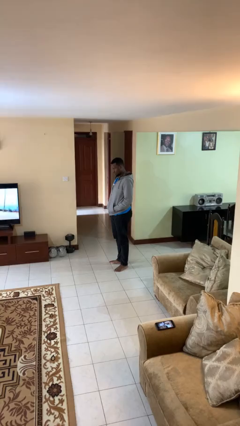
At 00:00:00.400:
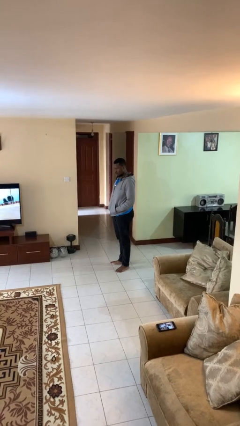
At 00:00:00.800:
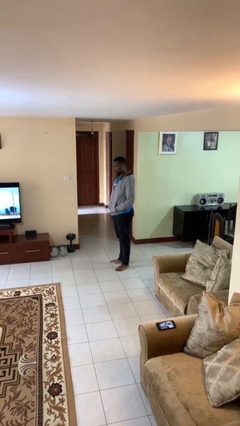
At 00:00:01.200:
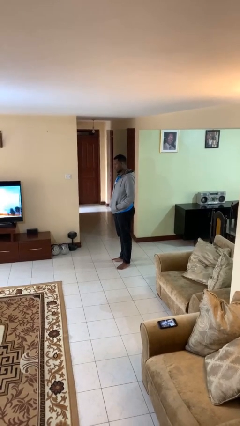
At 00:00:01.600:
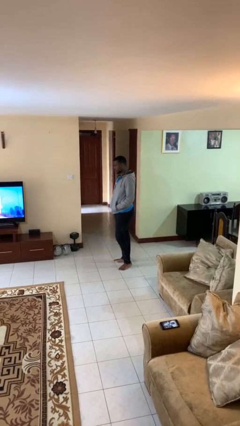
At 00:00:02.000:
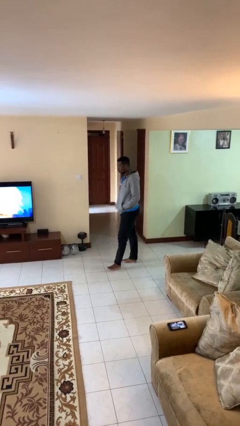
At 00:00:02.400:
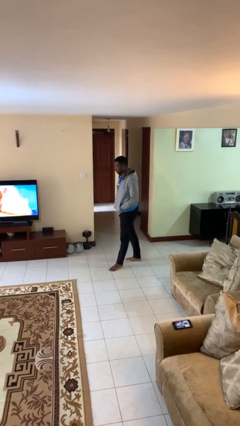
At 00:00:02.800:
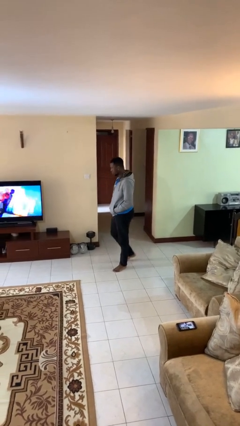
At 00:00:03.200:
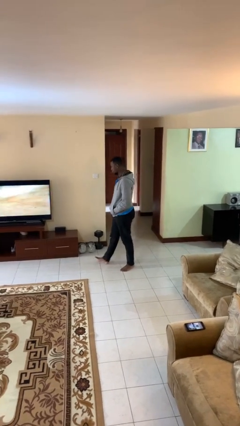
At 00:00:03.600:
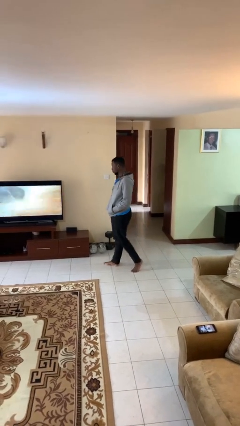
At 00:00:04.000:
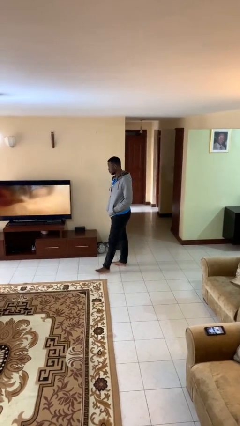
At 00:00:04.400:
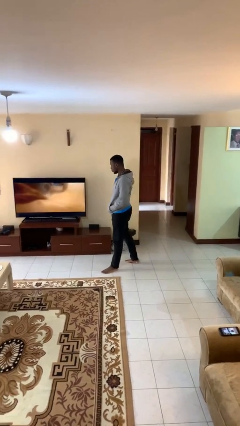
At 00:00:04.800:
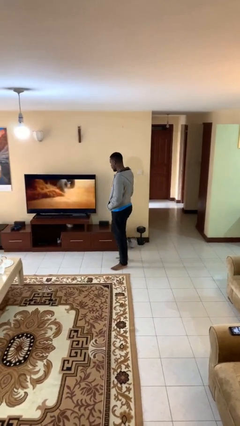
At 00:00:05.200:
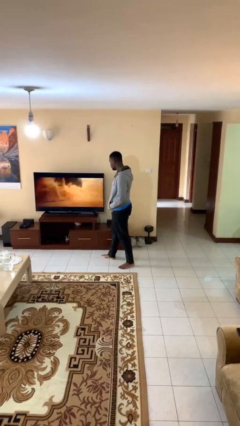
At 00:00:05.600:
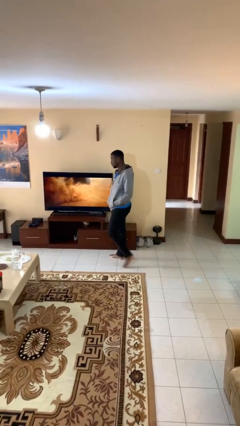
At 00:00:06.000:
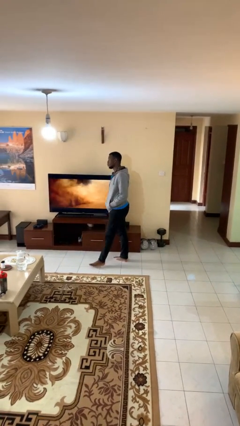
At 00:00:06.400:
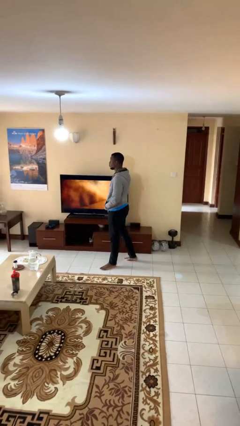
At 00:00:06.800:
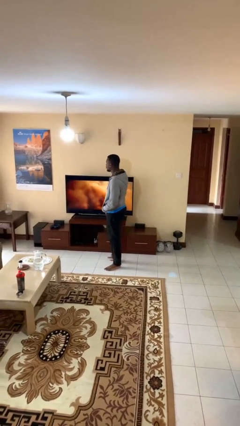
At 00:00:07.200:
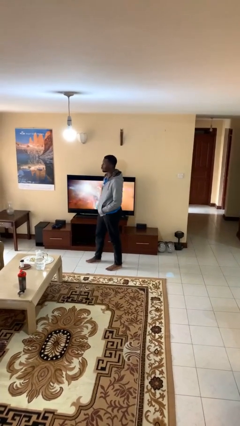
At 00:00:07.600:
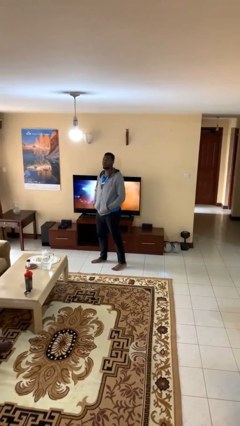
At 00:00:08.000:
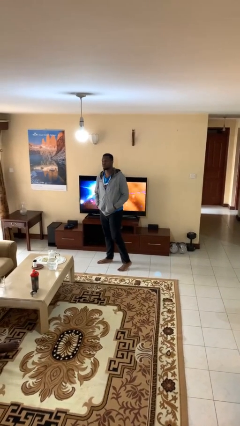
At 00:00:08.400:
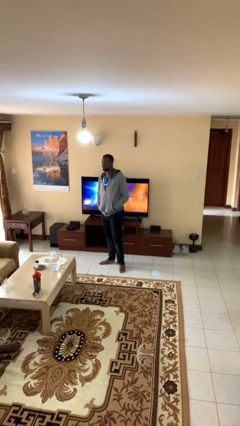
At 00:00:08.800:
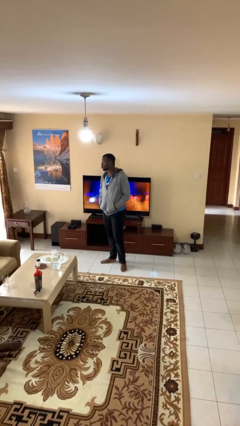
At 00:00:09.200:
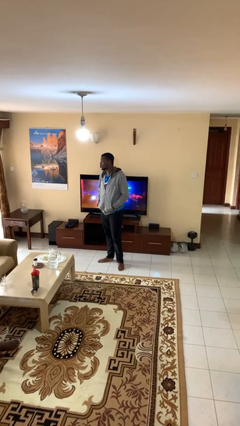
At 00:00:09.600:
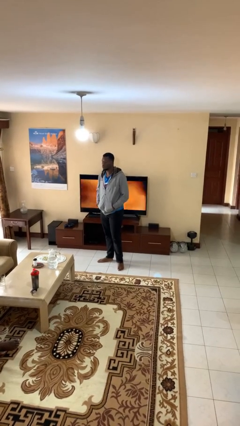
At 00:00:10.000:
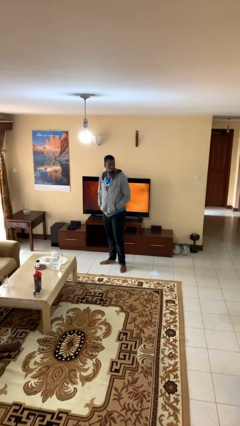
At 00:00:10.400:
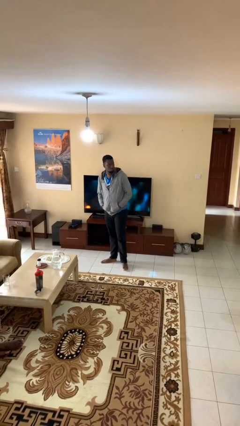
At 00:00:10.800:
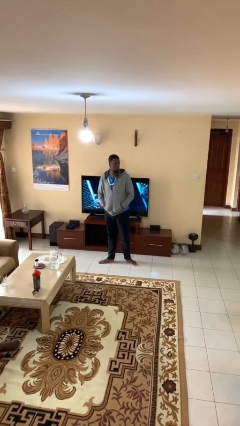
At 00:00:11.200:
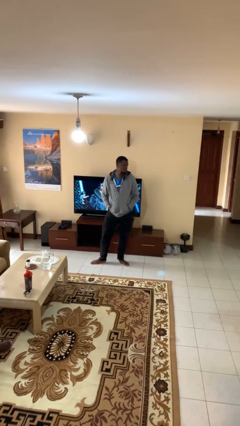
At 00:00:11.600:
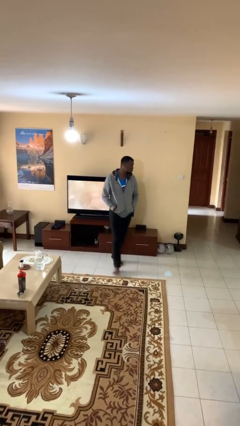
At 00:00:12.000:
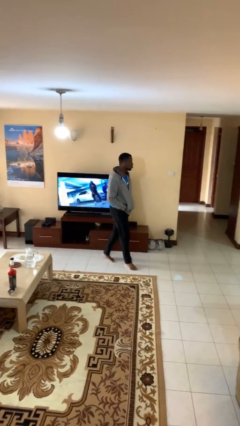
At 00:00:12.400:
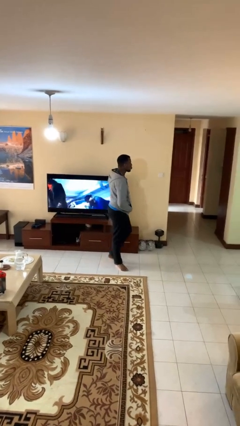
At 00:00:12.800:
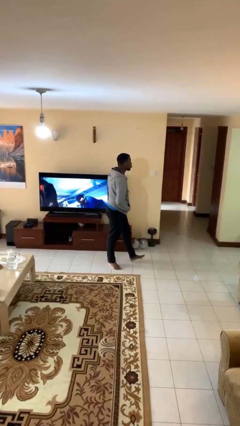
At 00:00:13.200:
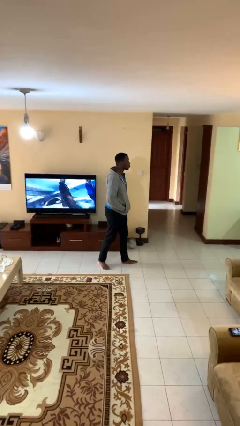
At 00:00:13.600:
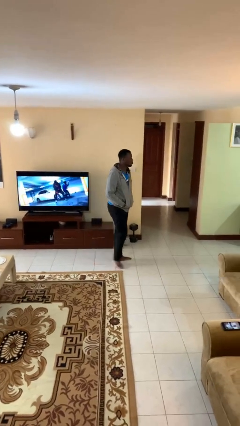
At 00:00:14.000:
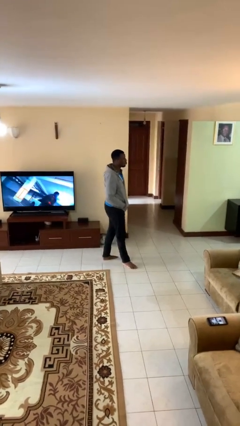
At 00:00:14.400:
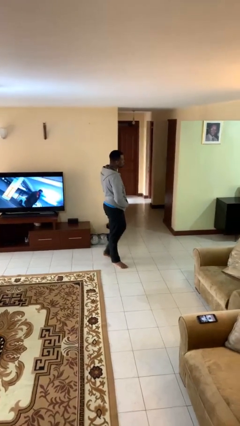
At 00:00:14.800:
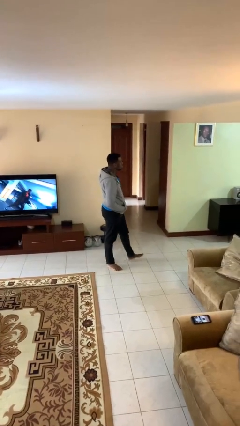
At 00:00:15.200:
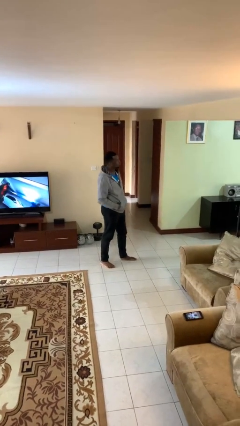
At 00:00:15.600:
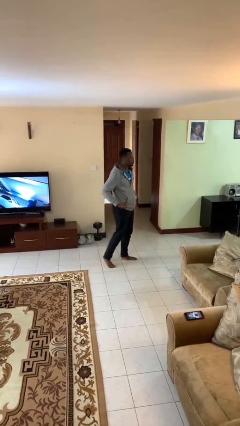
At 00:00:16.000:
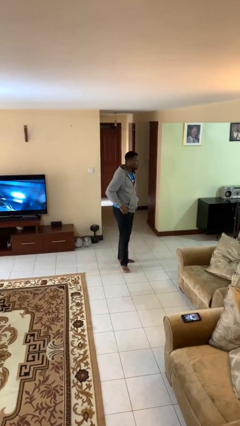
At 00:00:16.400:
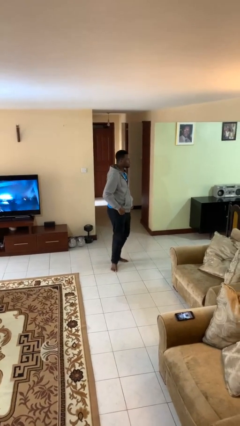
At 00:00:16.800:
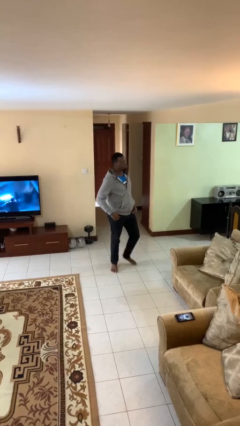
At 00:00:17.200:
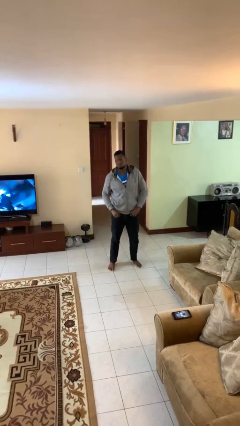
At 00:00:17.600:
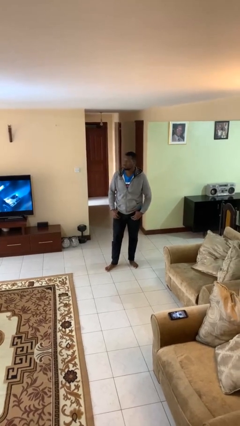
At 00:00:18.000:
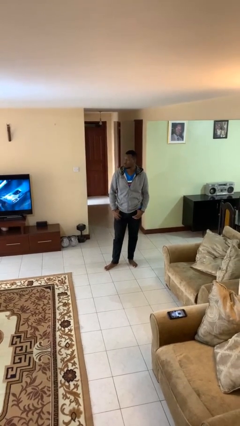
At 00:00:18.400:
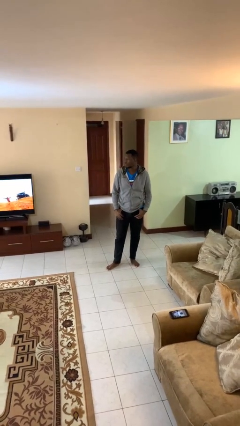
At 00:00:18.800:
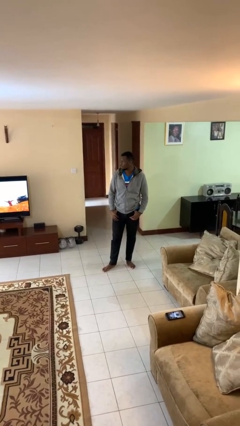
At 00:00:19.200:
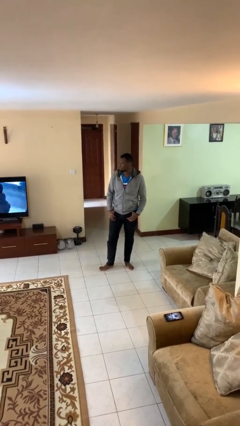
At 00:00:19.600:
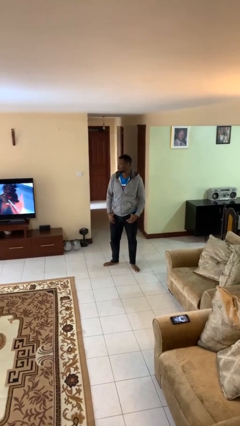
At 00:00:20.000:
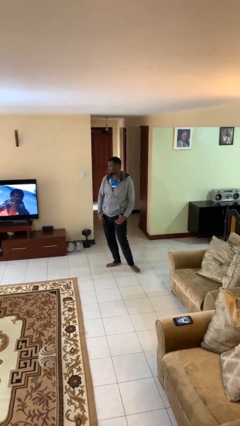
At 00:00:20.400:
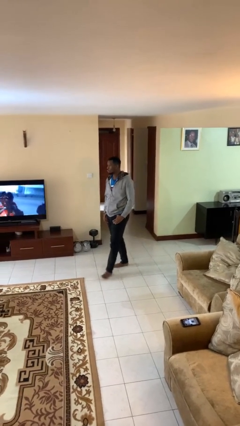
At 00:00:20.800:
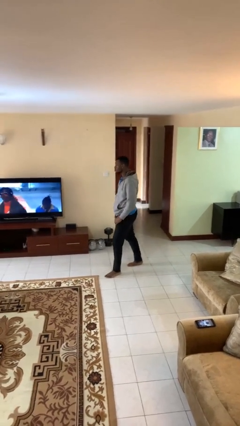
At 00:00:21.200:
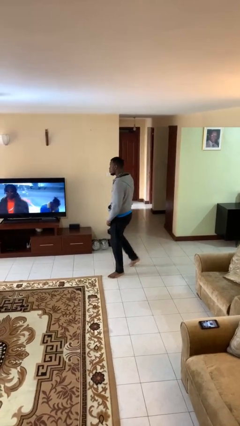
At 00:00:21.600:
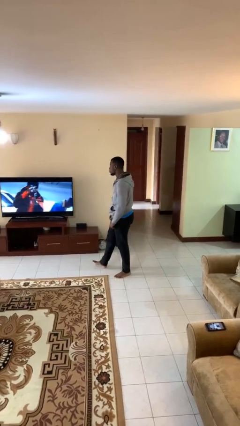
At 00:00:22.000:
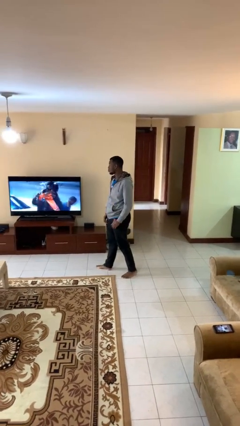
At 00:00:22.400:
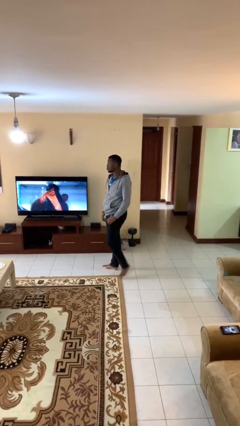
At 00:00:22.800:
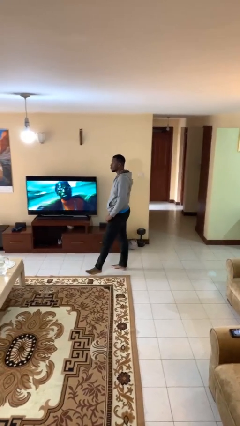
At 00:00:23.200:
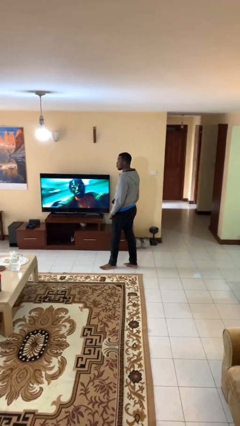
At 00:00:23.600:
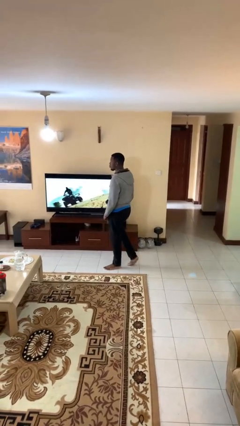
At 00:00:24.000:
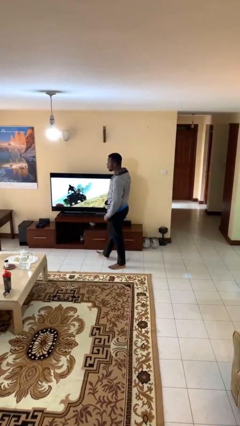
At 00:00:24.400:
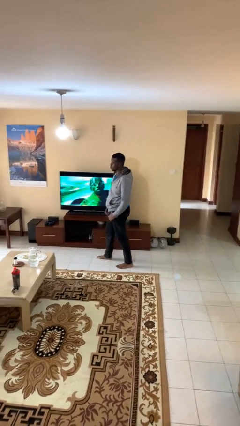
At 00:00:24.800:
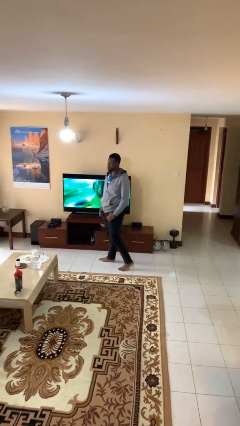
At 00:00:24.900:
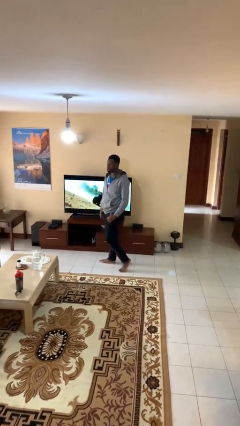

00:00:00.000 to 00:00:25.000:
person walks

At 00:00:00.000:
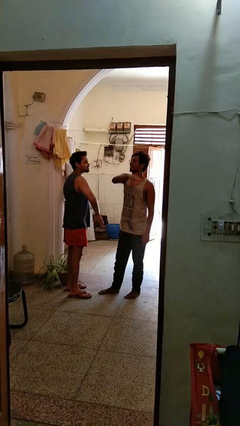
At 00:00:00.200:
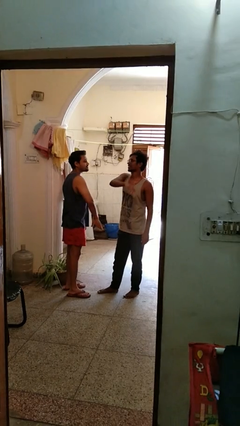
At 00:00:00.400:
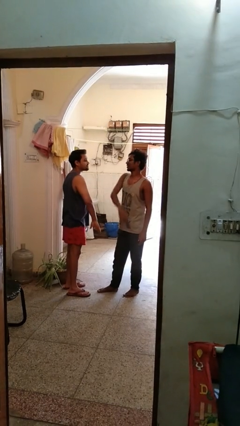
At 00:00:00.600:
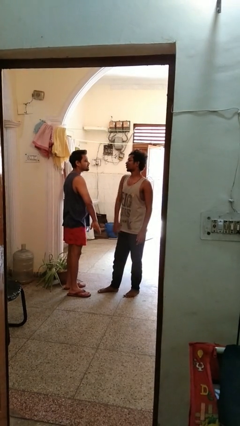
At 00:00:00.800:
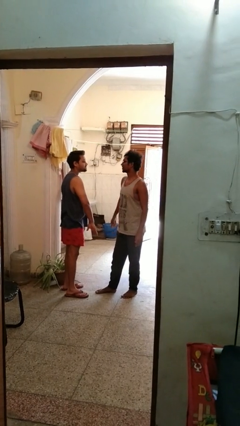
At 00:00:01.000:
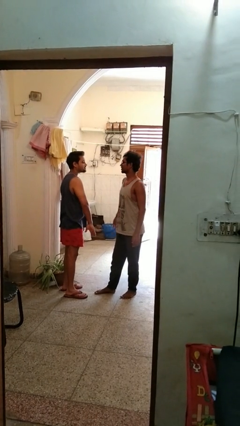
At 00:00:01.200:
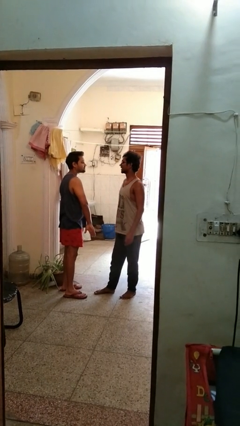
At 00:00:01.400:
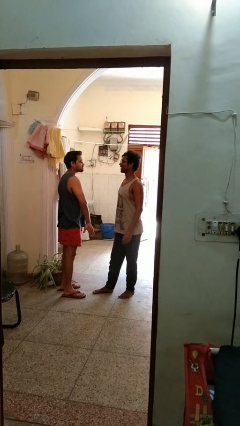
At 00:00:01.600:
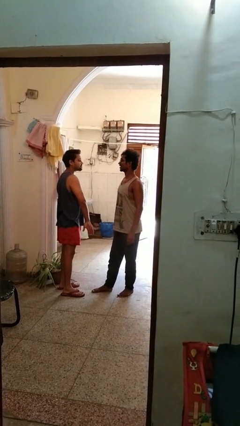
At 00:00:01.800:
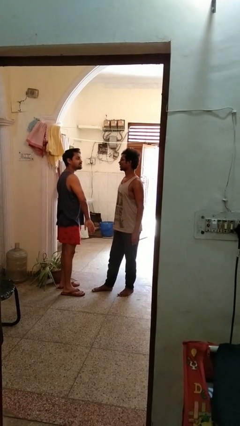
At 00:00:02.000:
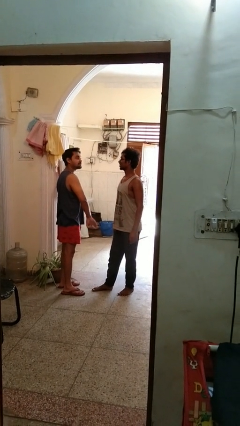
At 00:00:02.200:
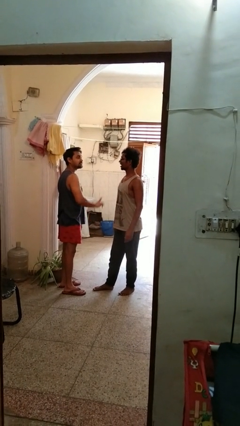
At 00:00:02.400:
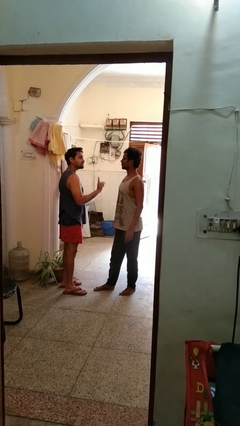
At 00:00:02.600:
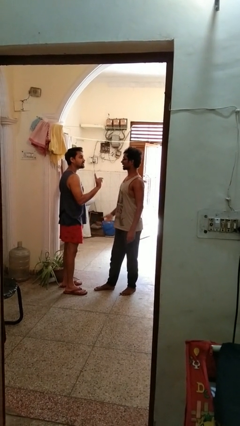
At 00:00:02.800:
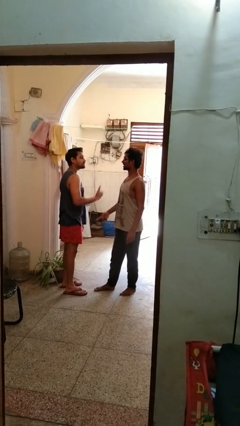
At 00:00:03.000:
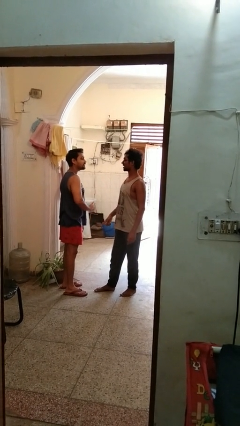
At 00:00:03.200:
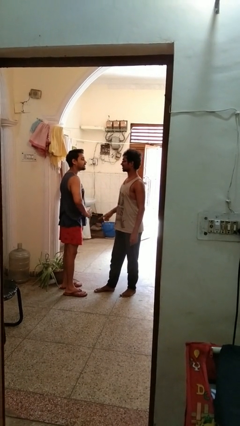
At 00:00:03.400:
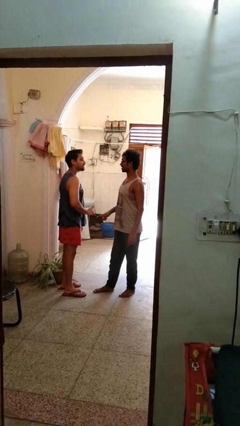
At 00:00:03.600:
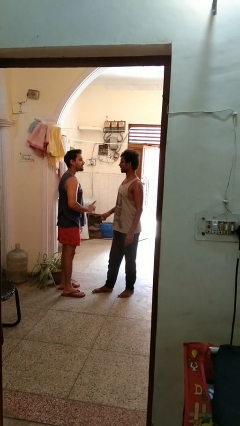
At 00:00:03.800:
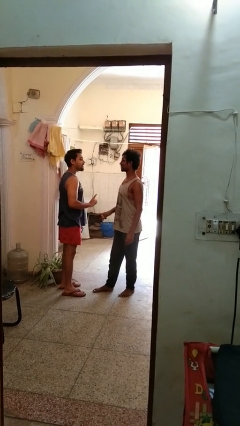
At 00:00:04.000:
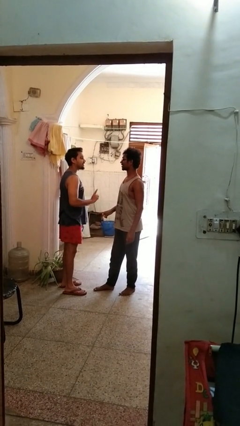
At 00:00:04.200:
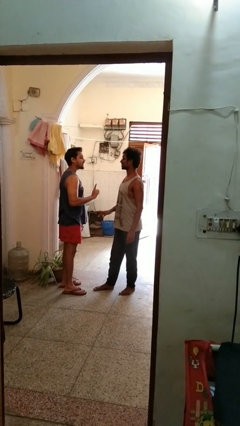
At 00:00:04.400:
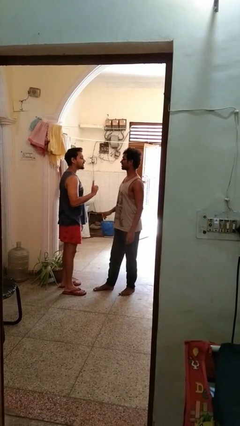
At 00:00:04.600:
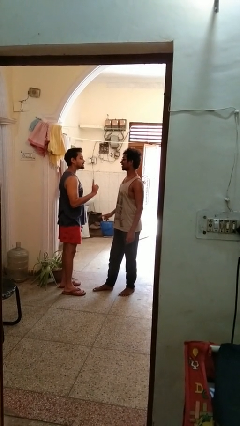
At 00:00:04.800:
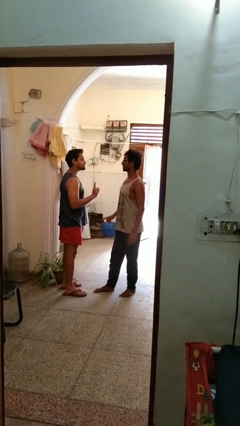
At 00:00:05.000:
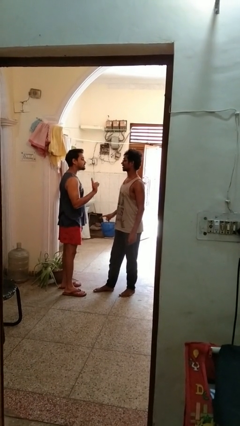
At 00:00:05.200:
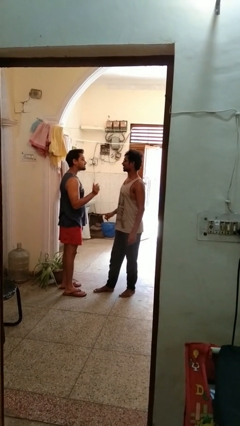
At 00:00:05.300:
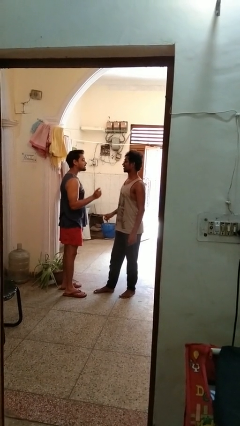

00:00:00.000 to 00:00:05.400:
person highfives hand

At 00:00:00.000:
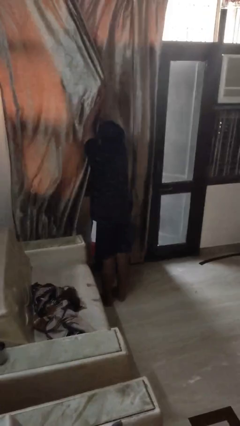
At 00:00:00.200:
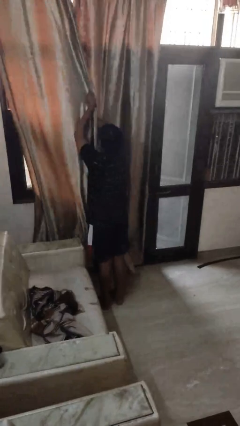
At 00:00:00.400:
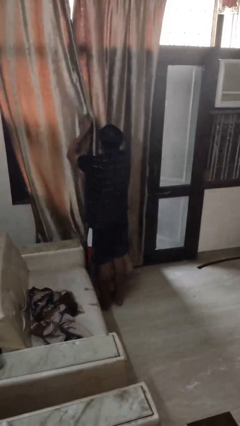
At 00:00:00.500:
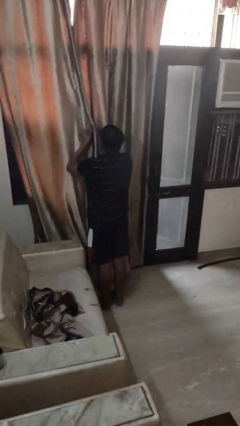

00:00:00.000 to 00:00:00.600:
person closes curtains
